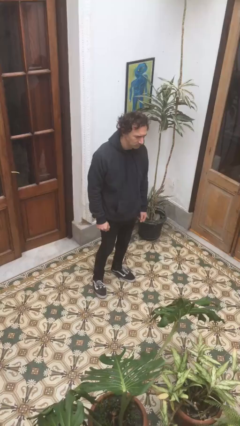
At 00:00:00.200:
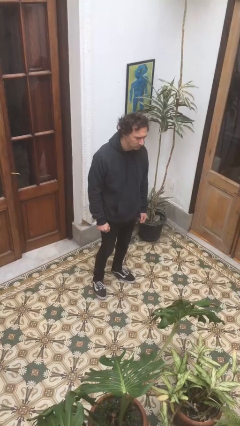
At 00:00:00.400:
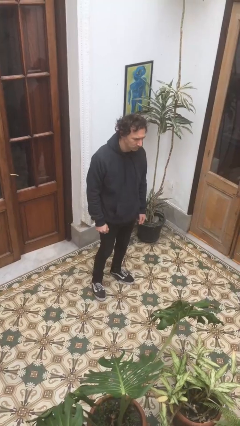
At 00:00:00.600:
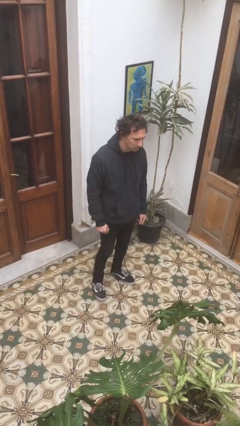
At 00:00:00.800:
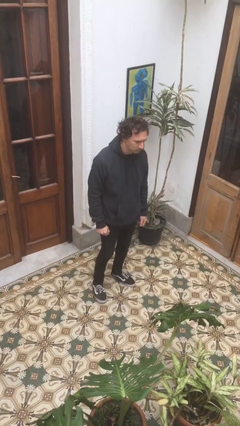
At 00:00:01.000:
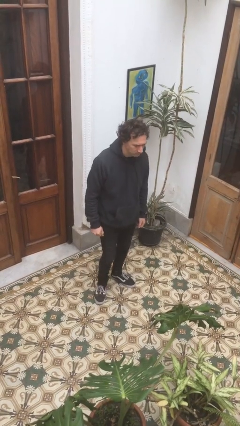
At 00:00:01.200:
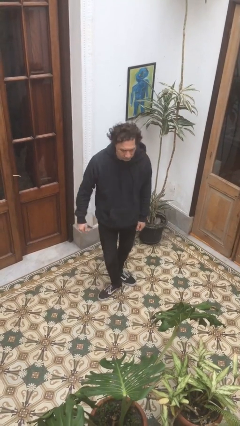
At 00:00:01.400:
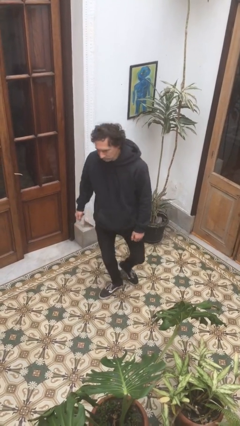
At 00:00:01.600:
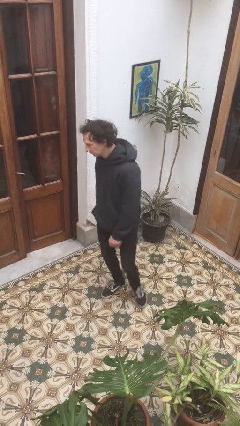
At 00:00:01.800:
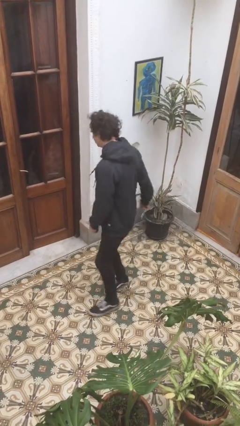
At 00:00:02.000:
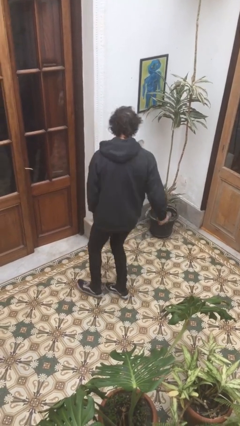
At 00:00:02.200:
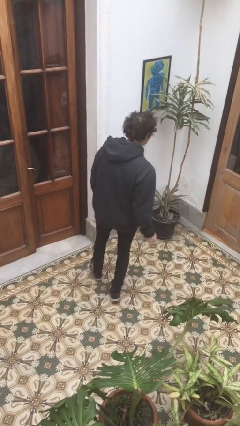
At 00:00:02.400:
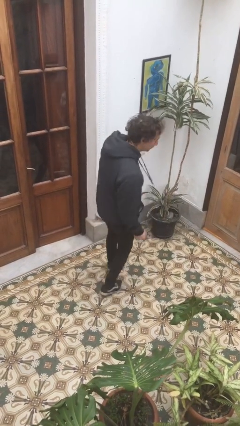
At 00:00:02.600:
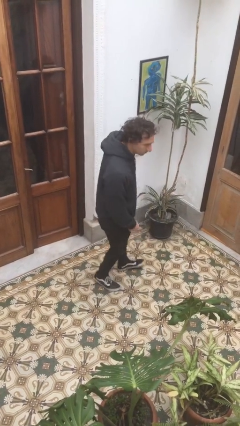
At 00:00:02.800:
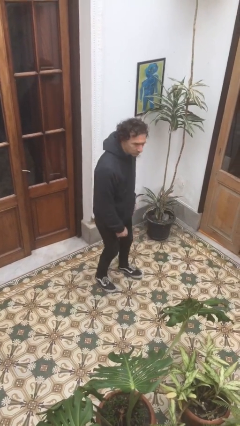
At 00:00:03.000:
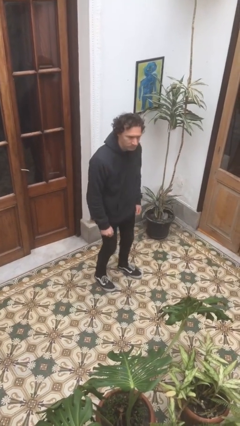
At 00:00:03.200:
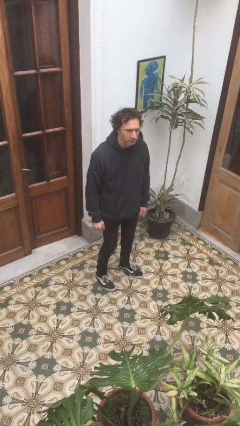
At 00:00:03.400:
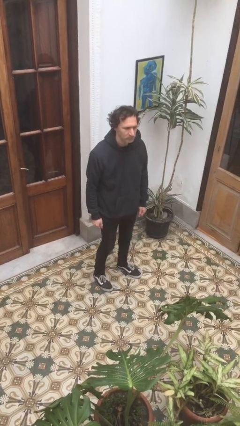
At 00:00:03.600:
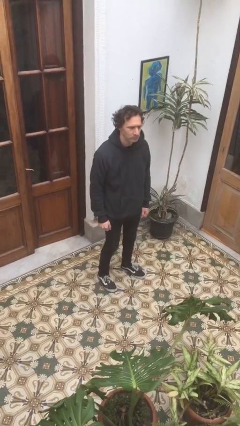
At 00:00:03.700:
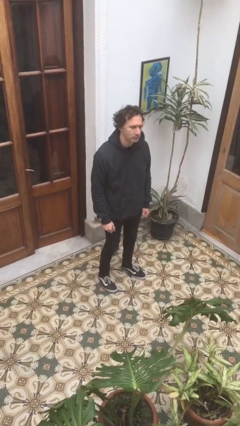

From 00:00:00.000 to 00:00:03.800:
person twirls

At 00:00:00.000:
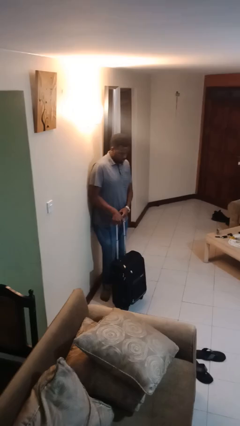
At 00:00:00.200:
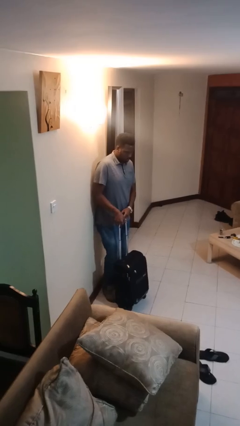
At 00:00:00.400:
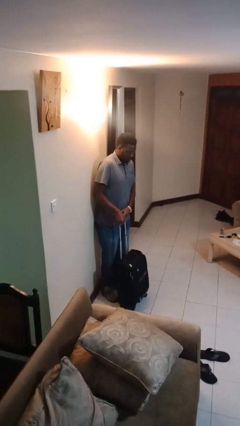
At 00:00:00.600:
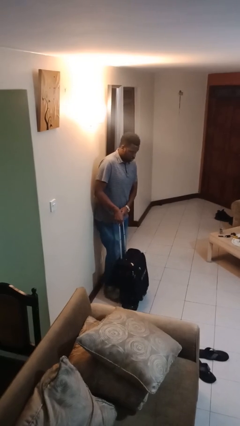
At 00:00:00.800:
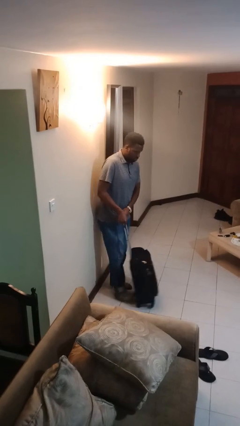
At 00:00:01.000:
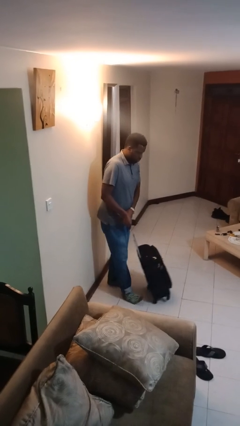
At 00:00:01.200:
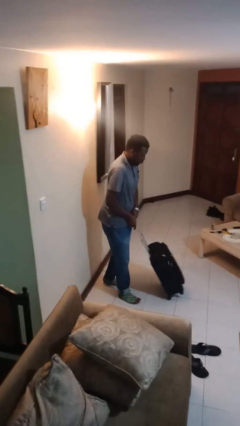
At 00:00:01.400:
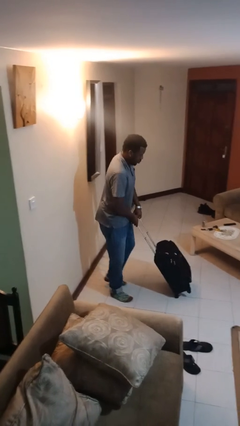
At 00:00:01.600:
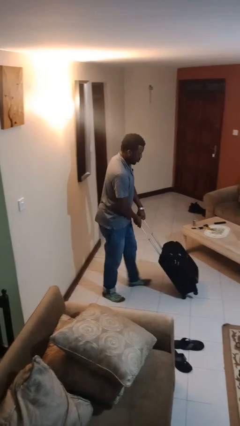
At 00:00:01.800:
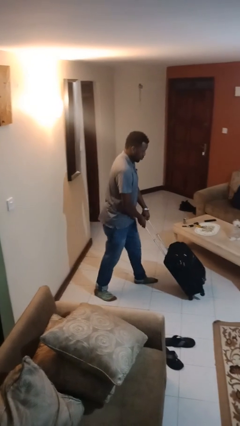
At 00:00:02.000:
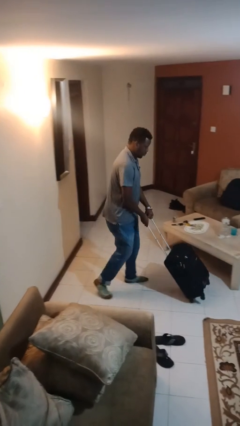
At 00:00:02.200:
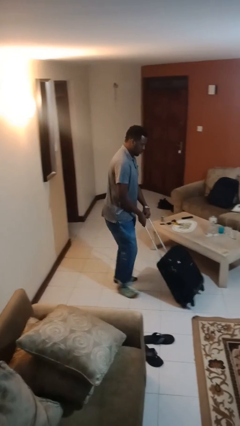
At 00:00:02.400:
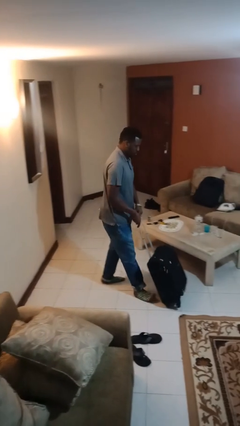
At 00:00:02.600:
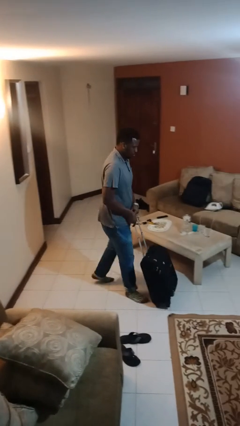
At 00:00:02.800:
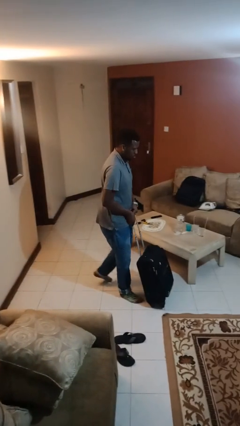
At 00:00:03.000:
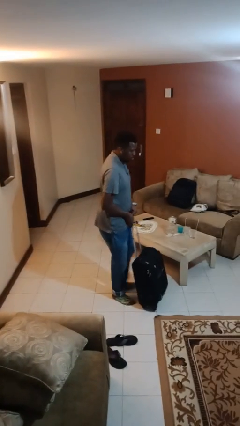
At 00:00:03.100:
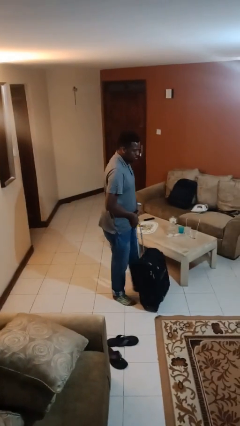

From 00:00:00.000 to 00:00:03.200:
person pushes wheeled cart

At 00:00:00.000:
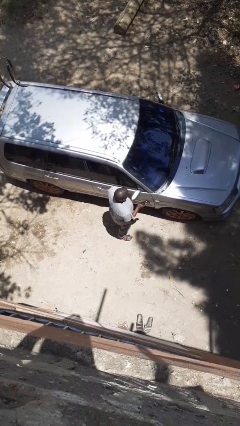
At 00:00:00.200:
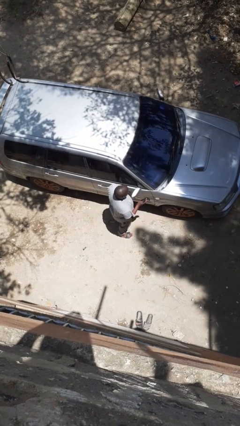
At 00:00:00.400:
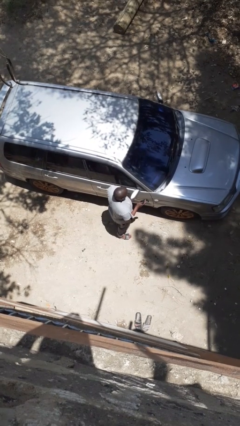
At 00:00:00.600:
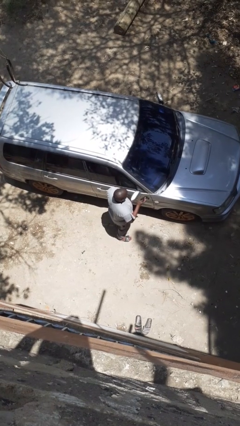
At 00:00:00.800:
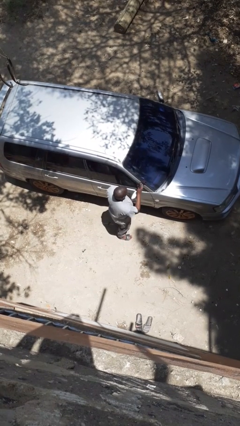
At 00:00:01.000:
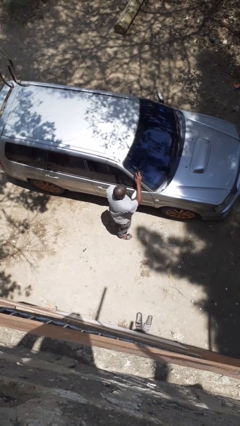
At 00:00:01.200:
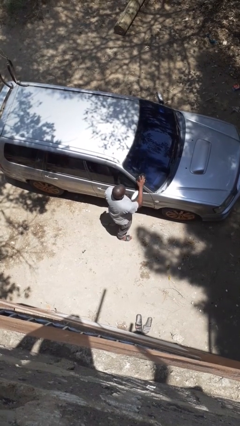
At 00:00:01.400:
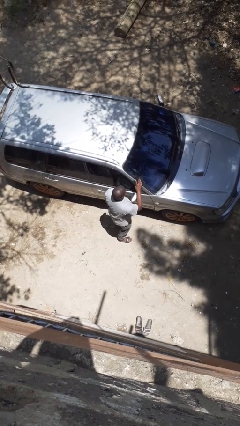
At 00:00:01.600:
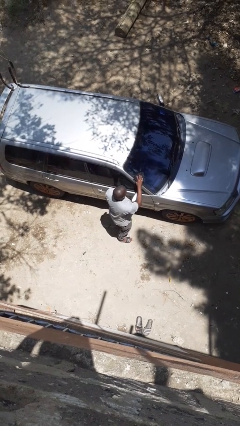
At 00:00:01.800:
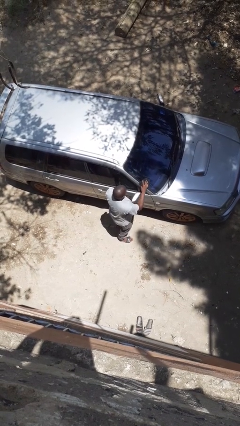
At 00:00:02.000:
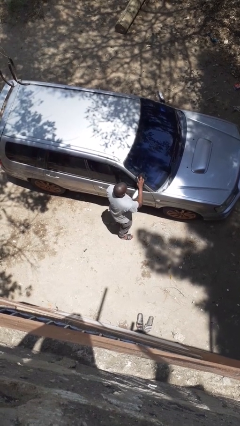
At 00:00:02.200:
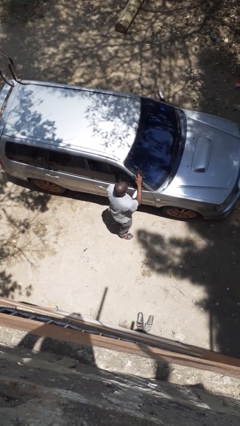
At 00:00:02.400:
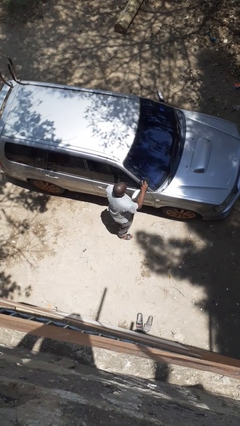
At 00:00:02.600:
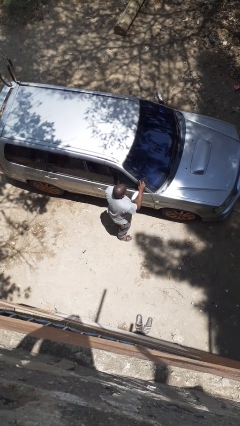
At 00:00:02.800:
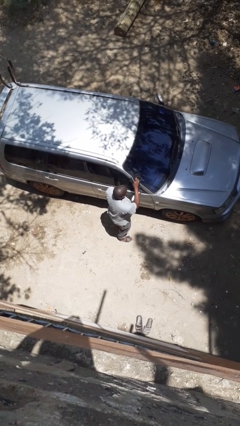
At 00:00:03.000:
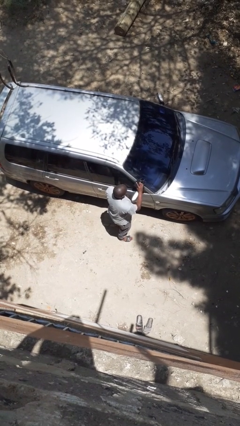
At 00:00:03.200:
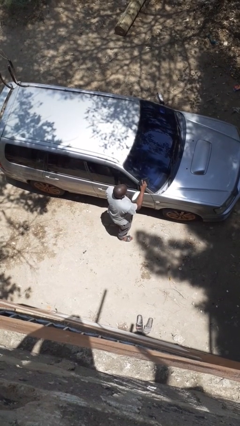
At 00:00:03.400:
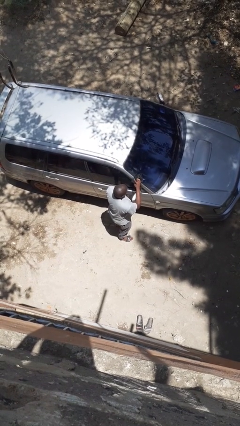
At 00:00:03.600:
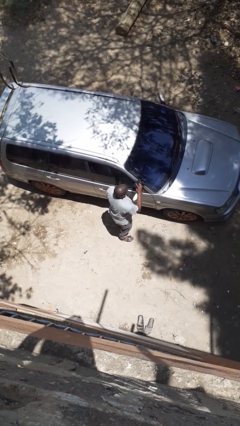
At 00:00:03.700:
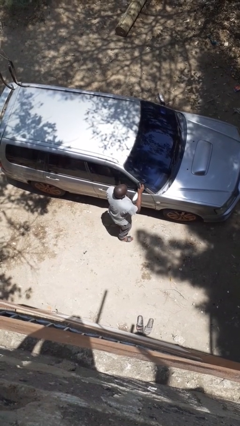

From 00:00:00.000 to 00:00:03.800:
person polishes car with rag

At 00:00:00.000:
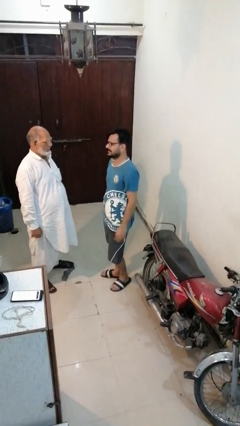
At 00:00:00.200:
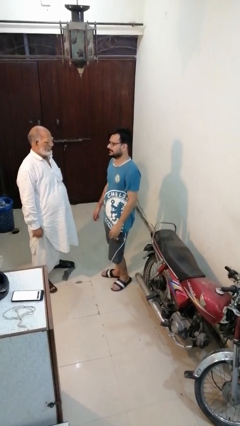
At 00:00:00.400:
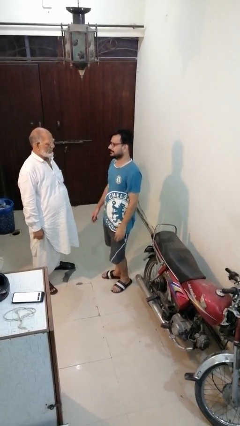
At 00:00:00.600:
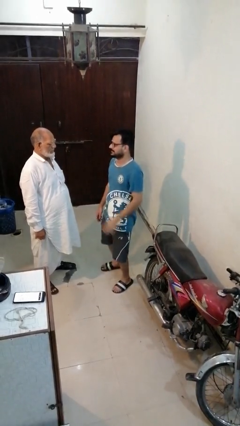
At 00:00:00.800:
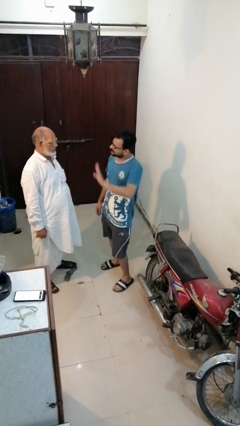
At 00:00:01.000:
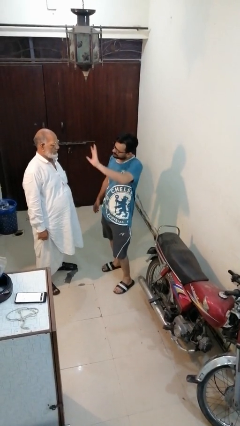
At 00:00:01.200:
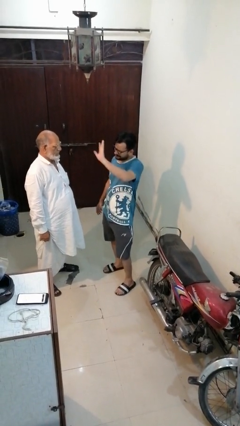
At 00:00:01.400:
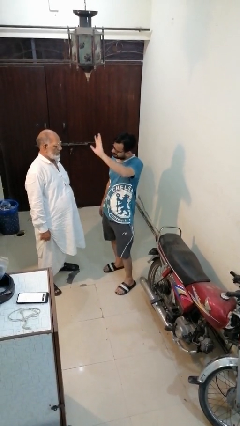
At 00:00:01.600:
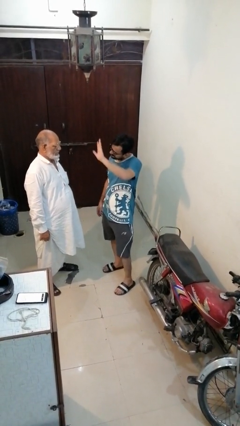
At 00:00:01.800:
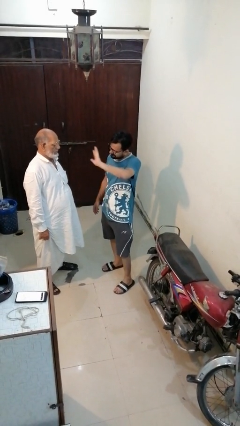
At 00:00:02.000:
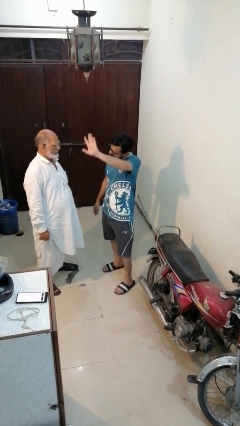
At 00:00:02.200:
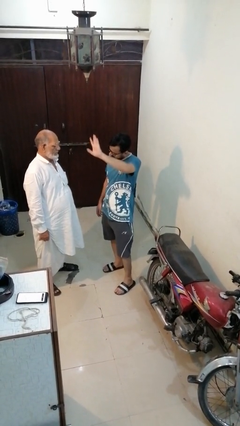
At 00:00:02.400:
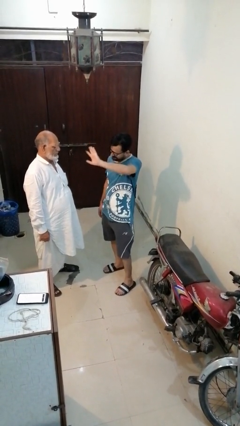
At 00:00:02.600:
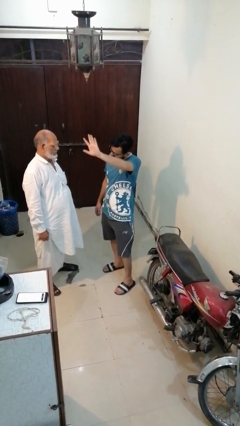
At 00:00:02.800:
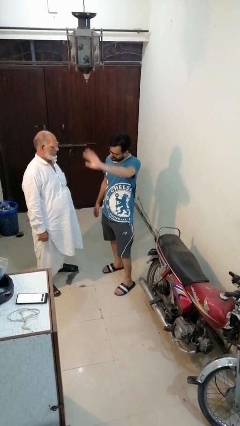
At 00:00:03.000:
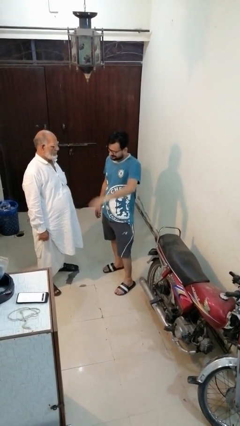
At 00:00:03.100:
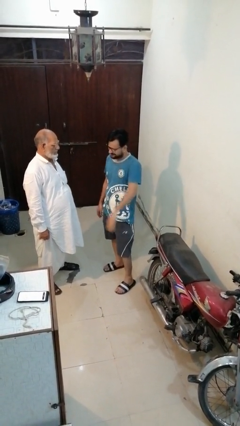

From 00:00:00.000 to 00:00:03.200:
person shoves person

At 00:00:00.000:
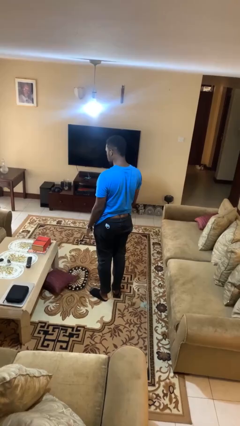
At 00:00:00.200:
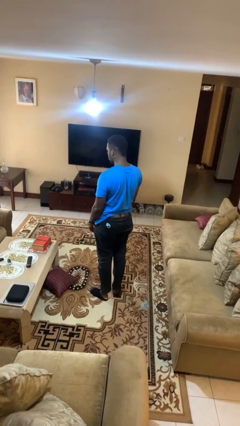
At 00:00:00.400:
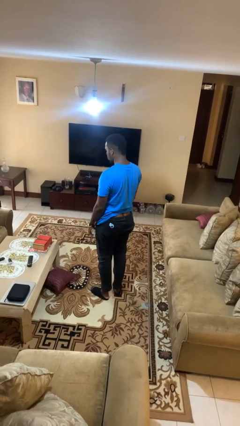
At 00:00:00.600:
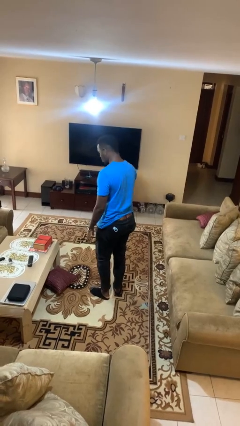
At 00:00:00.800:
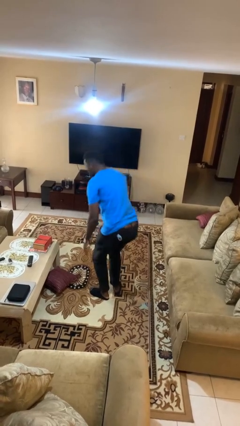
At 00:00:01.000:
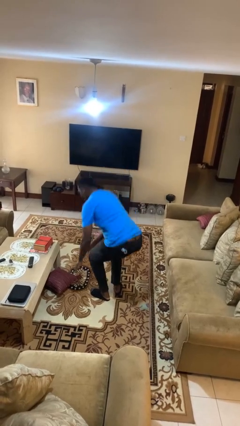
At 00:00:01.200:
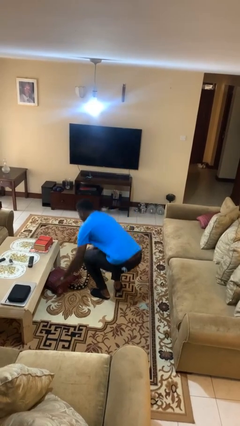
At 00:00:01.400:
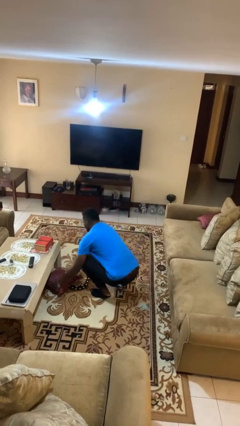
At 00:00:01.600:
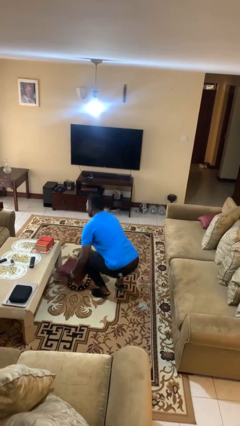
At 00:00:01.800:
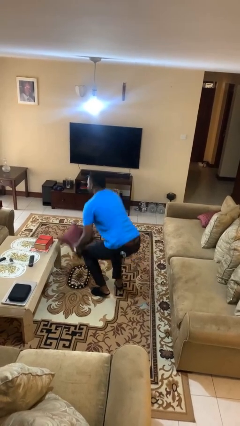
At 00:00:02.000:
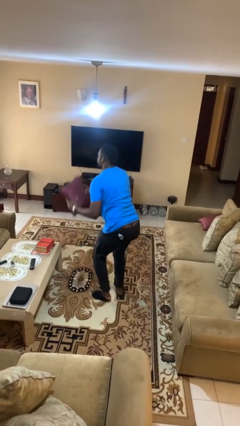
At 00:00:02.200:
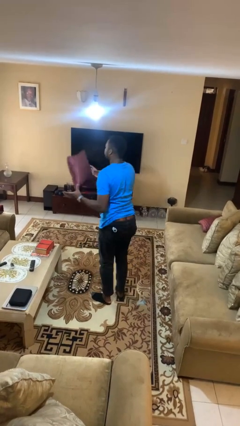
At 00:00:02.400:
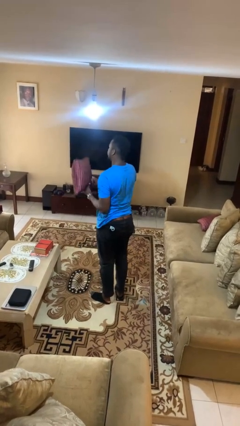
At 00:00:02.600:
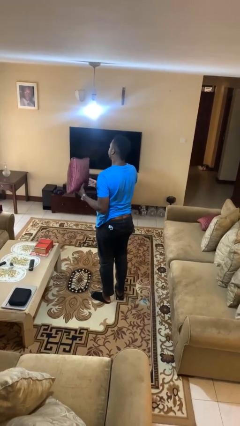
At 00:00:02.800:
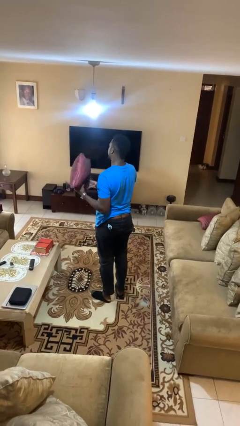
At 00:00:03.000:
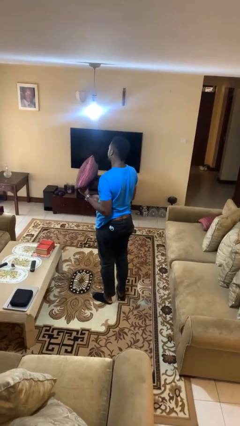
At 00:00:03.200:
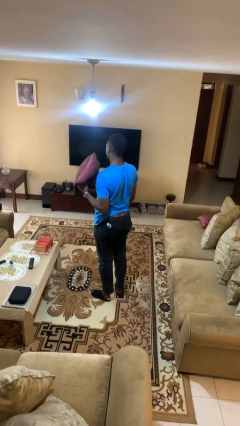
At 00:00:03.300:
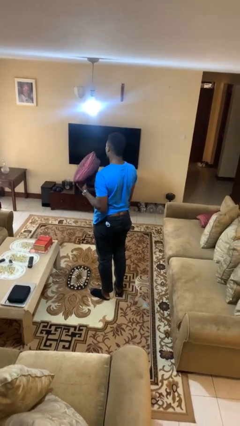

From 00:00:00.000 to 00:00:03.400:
person picks up object from floor
